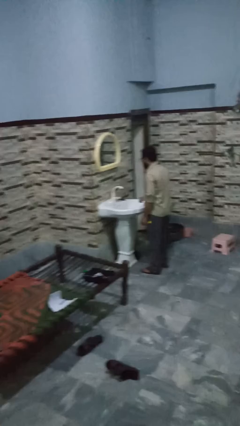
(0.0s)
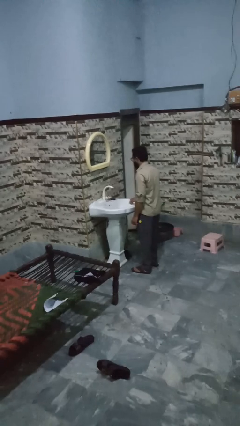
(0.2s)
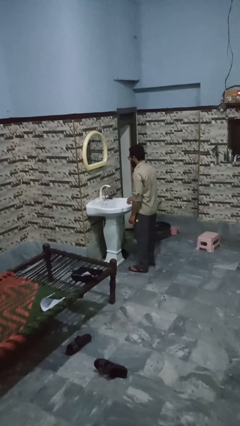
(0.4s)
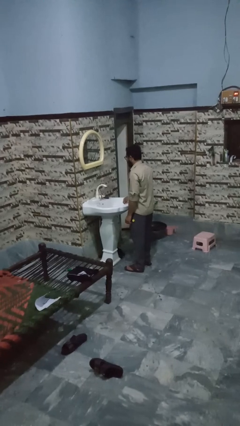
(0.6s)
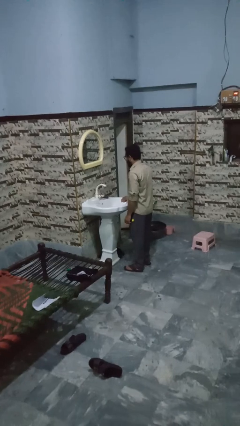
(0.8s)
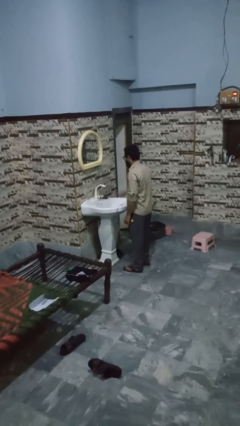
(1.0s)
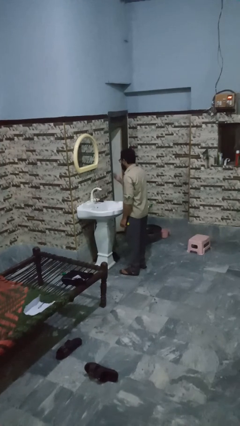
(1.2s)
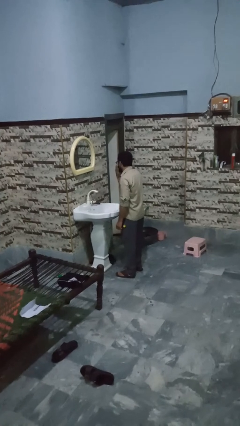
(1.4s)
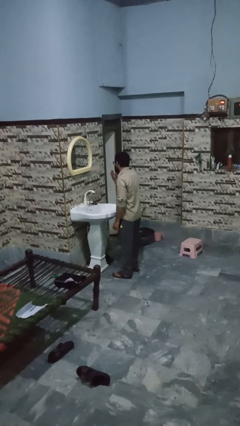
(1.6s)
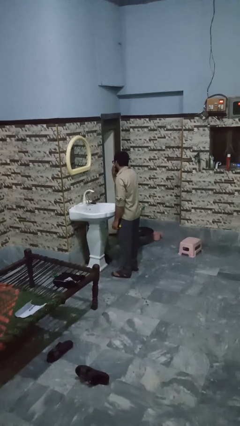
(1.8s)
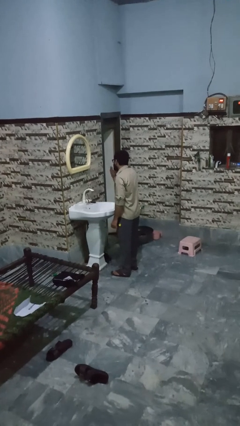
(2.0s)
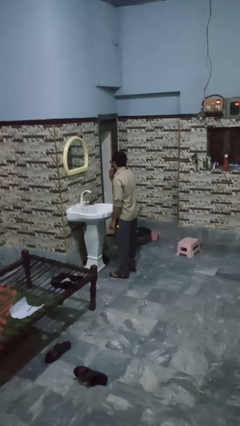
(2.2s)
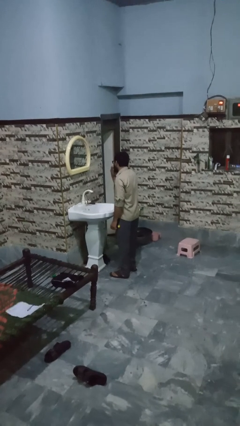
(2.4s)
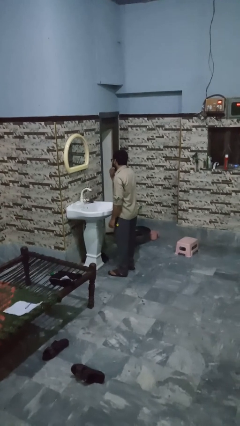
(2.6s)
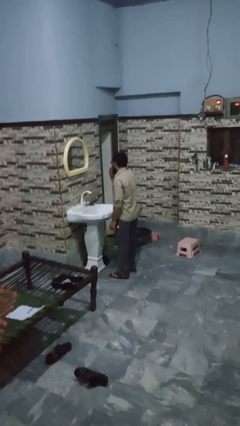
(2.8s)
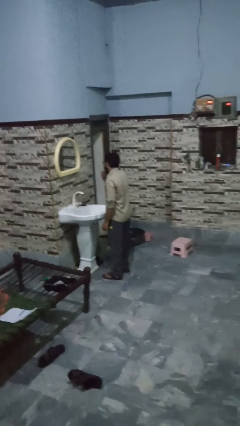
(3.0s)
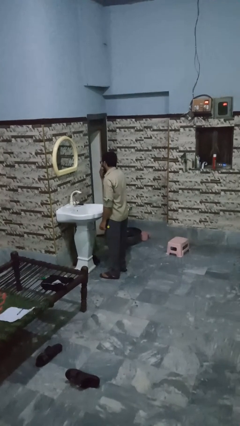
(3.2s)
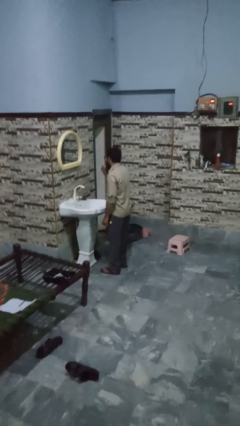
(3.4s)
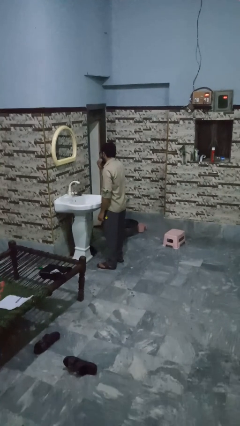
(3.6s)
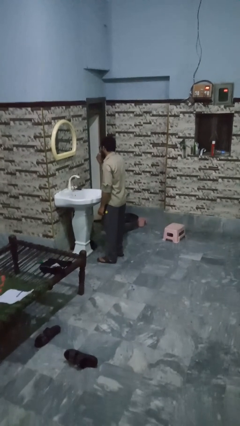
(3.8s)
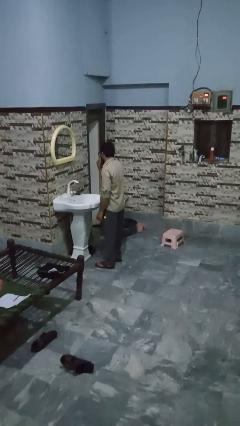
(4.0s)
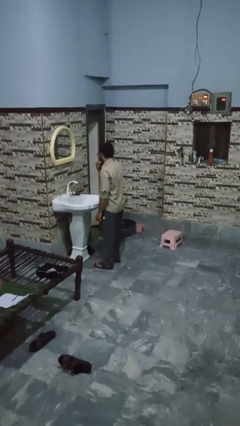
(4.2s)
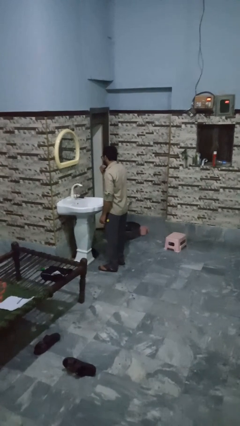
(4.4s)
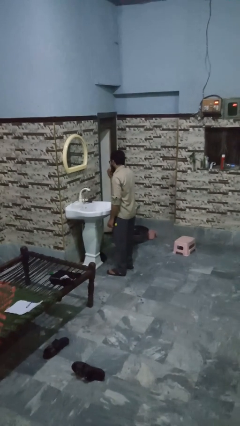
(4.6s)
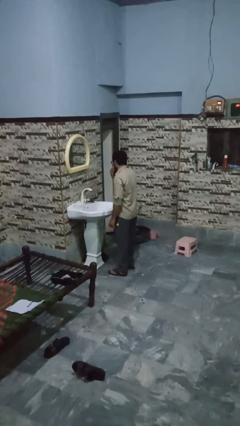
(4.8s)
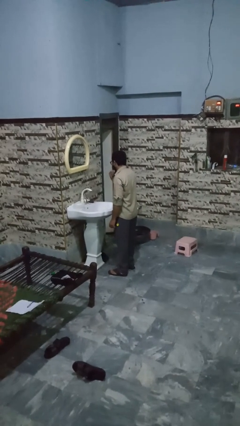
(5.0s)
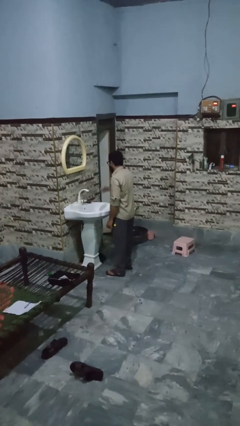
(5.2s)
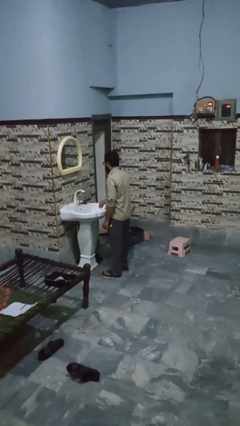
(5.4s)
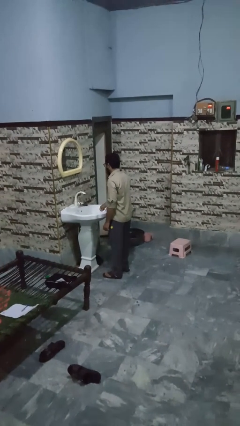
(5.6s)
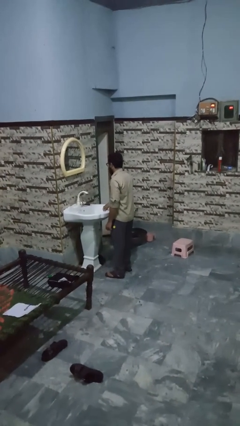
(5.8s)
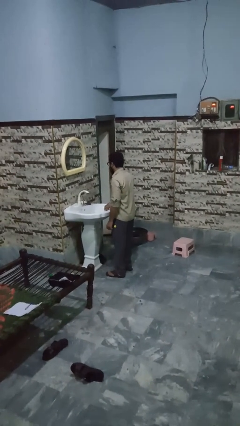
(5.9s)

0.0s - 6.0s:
person applies shaving cream

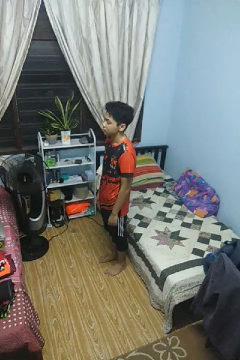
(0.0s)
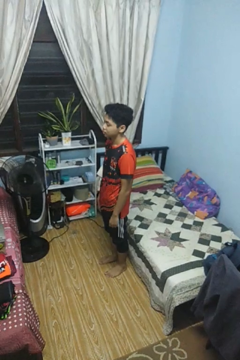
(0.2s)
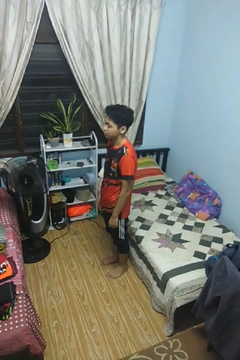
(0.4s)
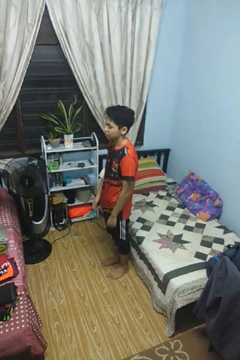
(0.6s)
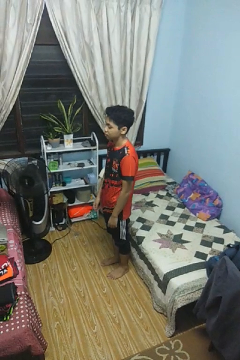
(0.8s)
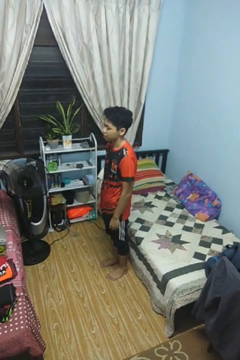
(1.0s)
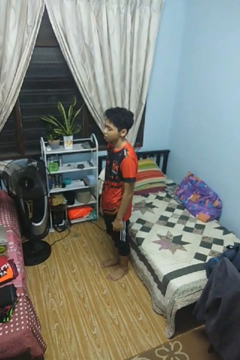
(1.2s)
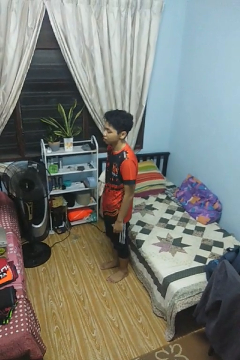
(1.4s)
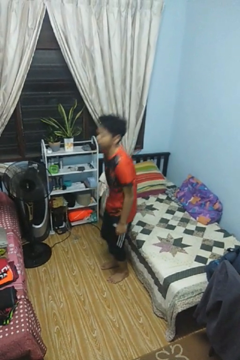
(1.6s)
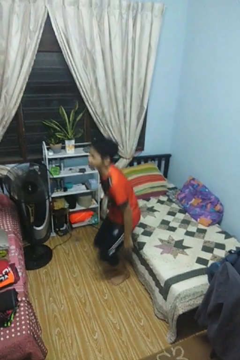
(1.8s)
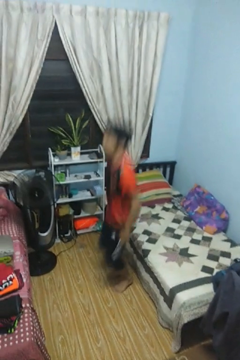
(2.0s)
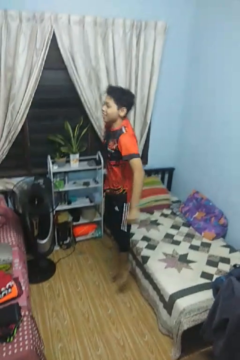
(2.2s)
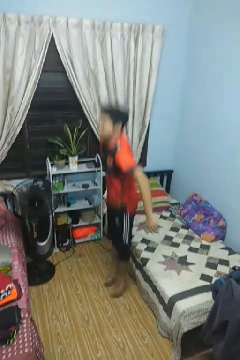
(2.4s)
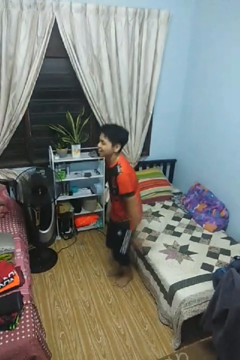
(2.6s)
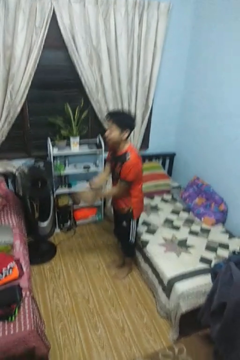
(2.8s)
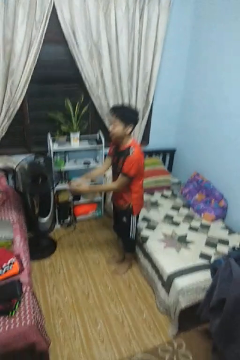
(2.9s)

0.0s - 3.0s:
person jumps

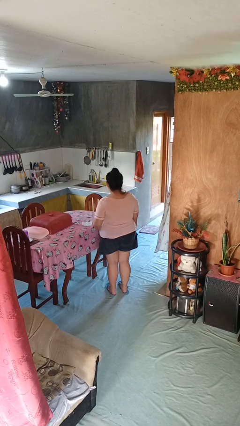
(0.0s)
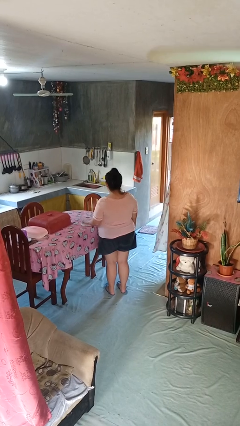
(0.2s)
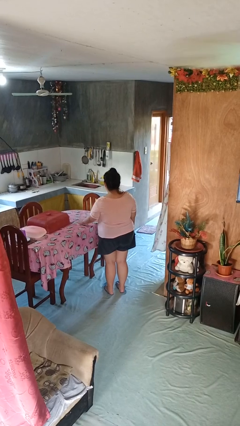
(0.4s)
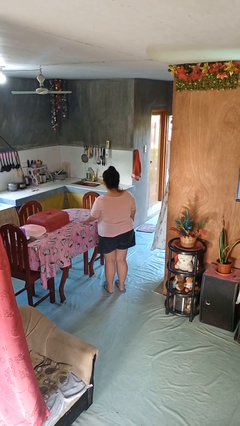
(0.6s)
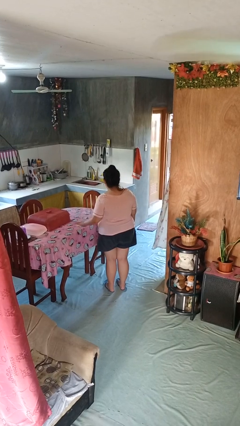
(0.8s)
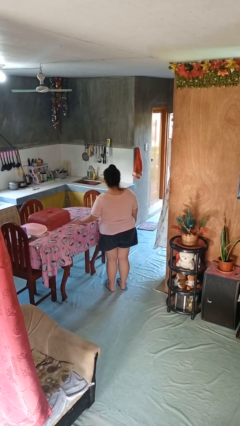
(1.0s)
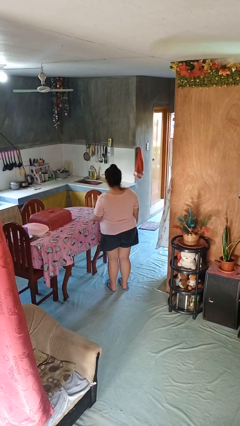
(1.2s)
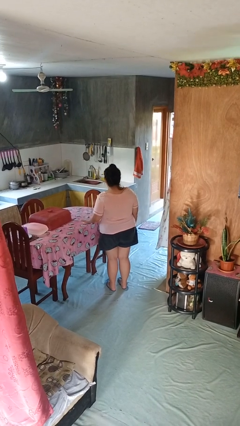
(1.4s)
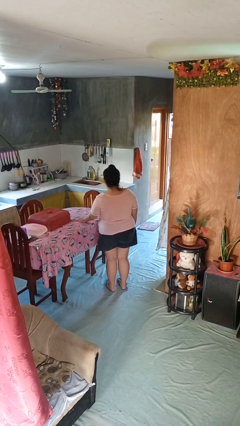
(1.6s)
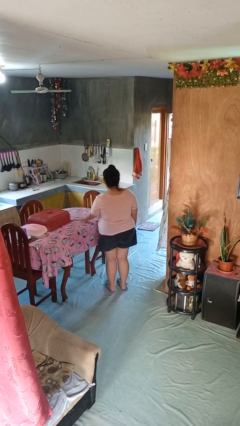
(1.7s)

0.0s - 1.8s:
person cleans table with rag

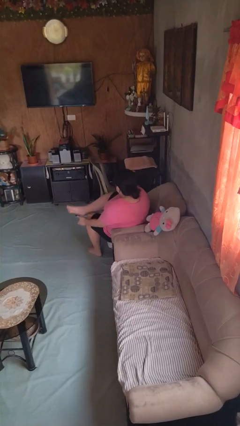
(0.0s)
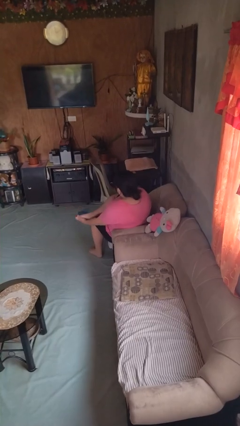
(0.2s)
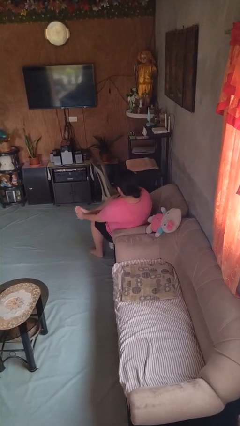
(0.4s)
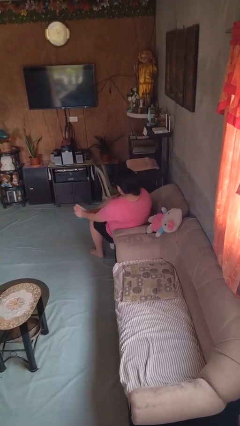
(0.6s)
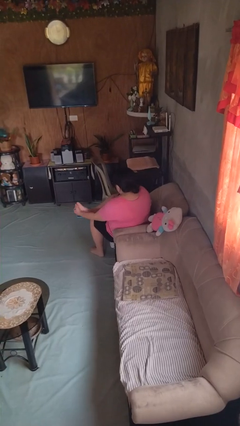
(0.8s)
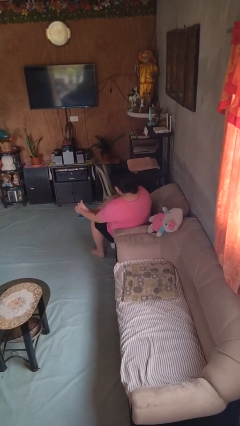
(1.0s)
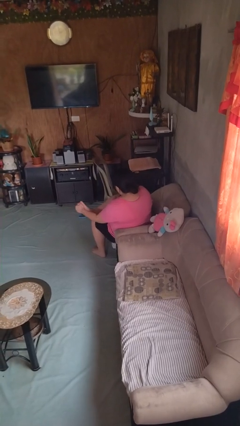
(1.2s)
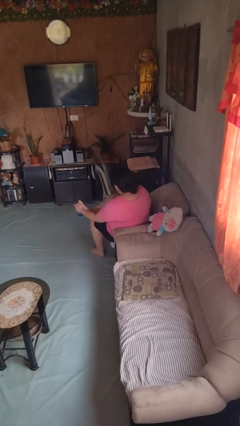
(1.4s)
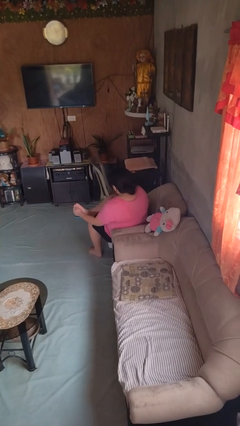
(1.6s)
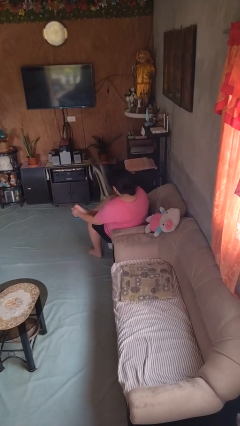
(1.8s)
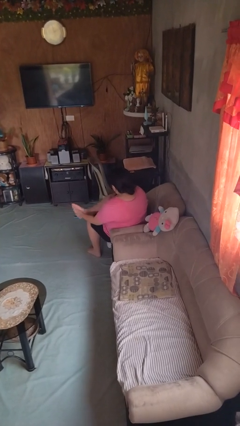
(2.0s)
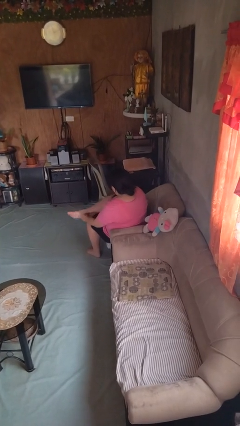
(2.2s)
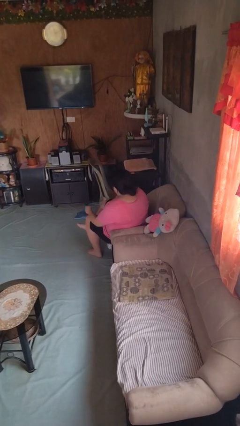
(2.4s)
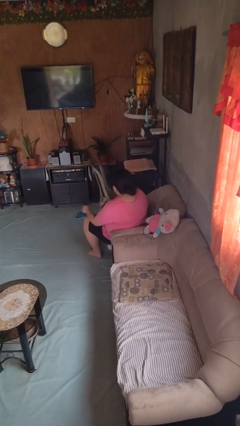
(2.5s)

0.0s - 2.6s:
person rubs foot

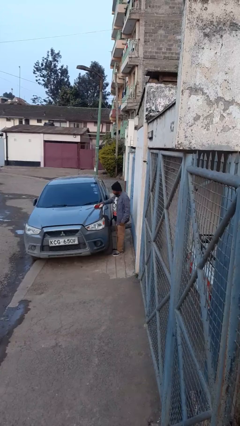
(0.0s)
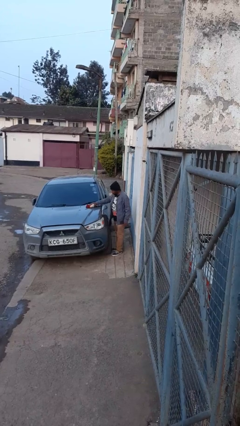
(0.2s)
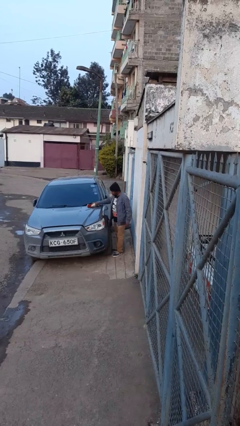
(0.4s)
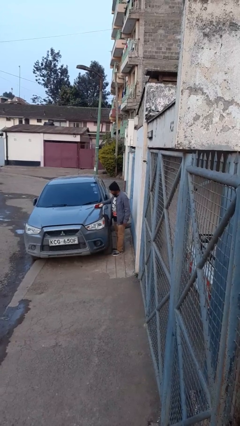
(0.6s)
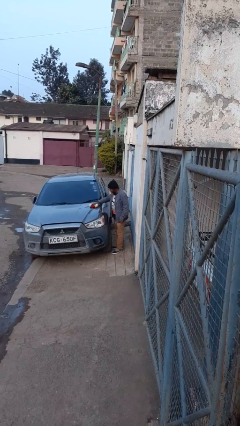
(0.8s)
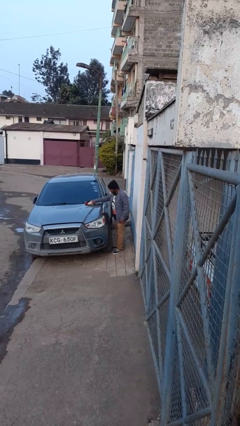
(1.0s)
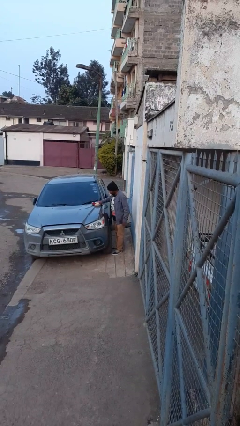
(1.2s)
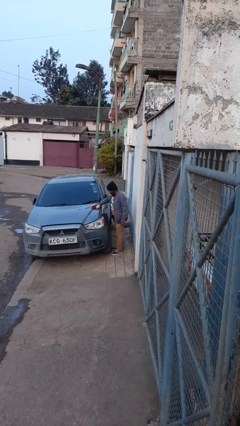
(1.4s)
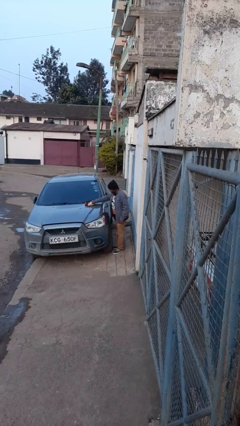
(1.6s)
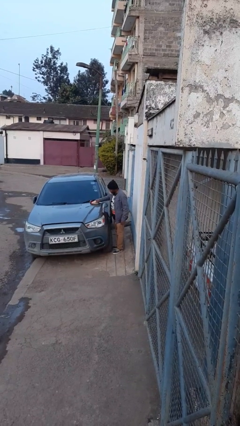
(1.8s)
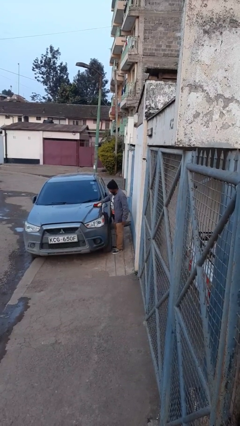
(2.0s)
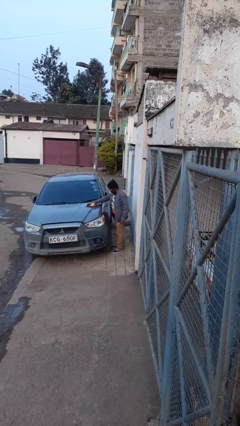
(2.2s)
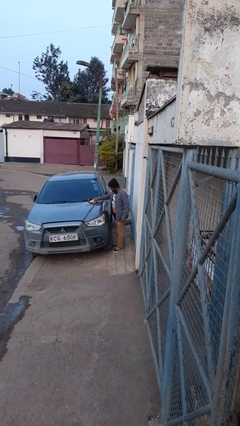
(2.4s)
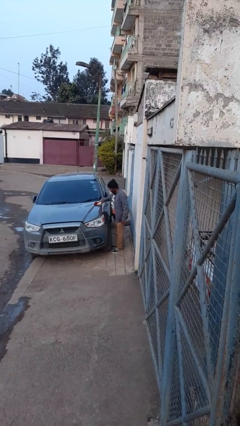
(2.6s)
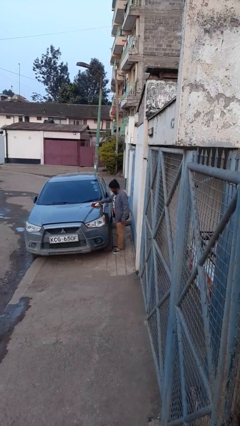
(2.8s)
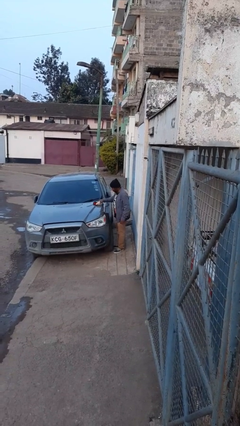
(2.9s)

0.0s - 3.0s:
person polishes car with rag

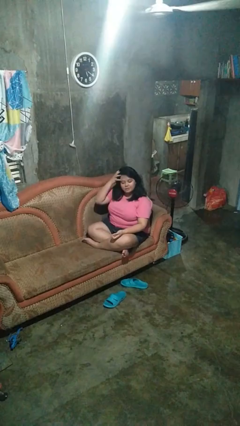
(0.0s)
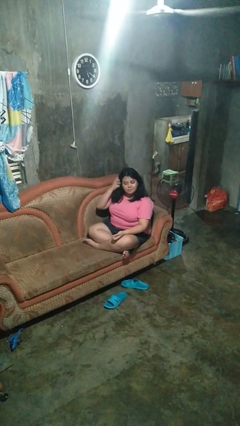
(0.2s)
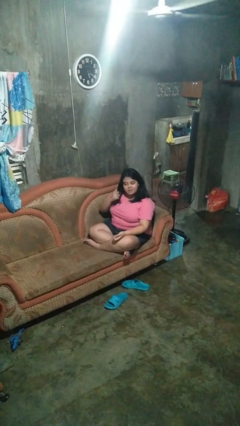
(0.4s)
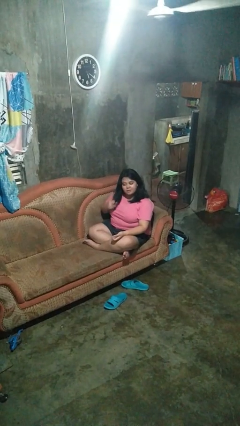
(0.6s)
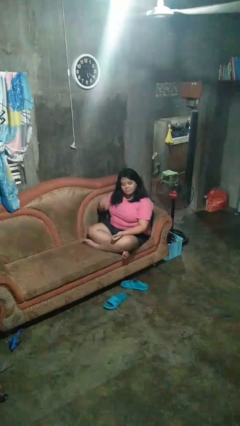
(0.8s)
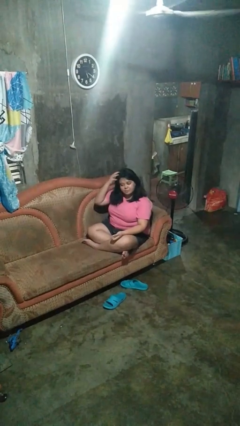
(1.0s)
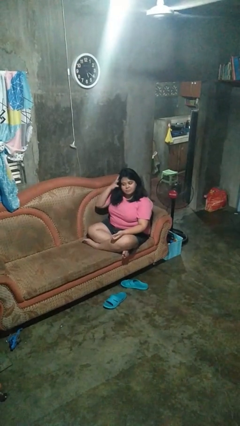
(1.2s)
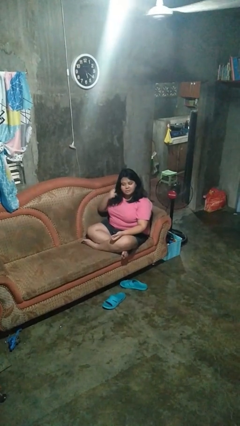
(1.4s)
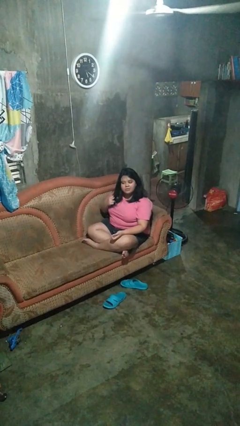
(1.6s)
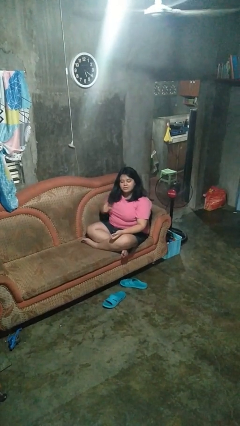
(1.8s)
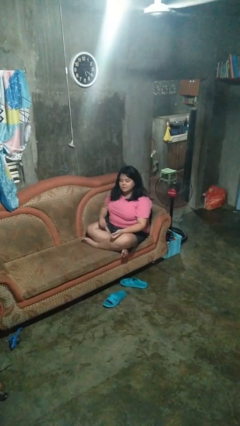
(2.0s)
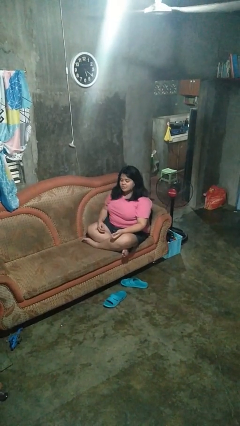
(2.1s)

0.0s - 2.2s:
person strokes hair
